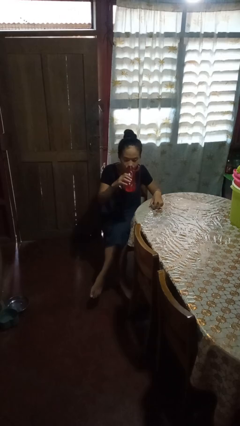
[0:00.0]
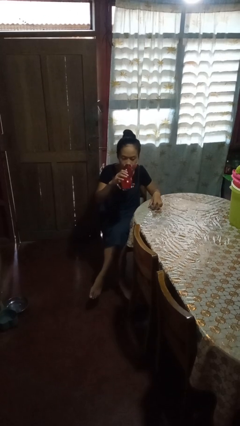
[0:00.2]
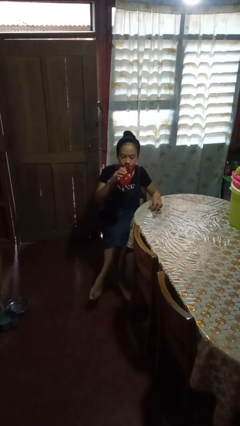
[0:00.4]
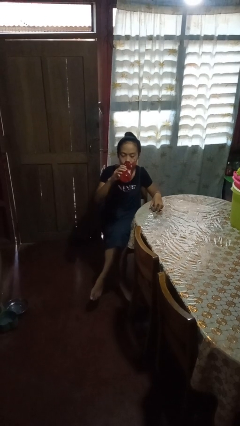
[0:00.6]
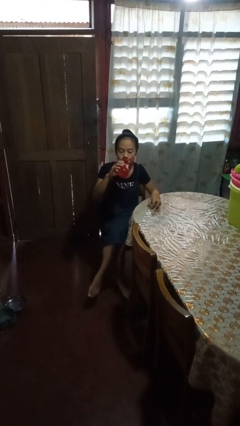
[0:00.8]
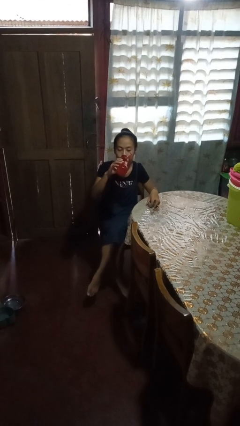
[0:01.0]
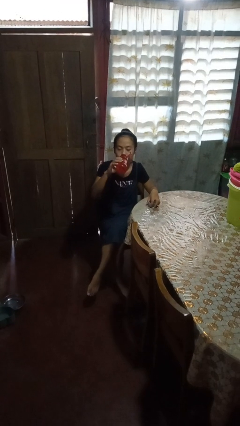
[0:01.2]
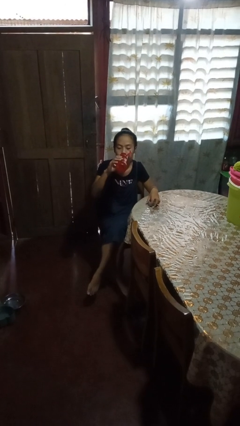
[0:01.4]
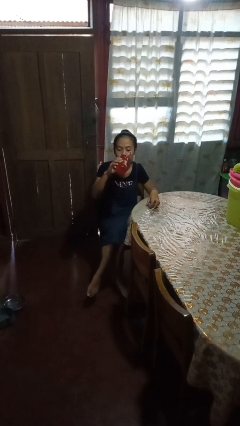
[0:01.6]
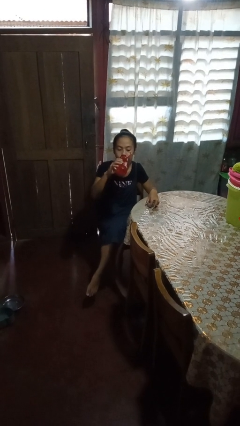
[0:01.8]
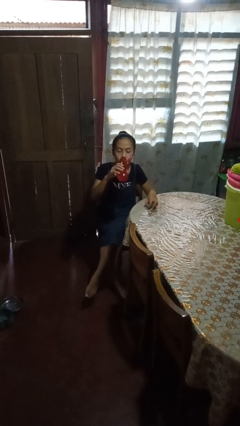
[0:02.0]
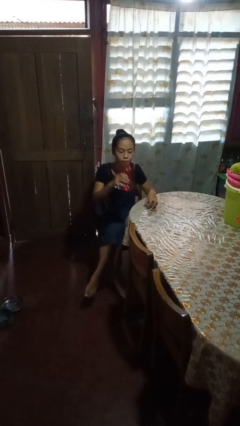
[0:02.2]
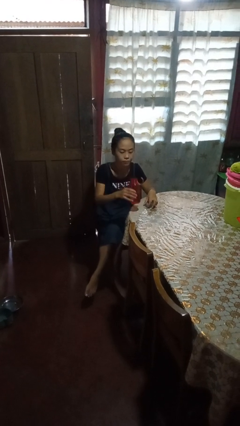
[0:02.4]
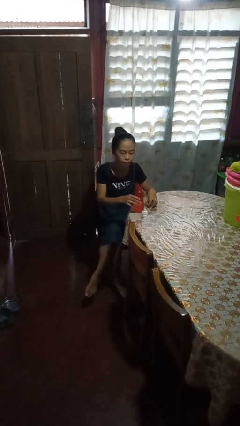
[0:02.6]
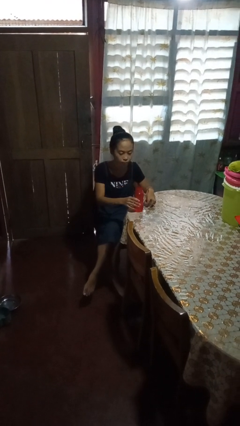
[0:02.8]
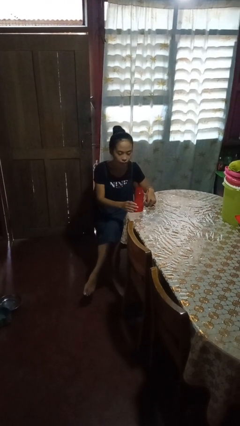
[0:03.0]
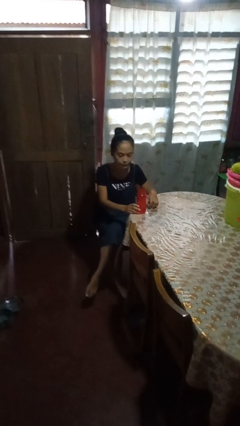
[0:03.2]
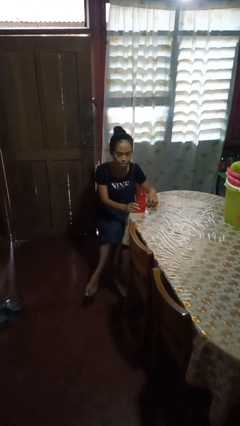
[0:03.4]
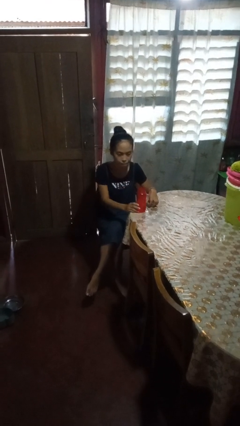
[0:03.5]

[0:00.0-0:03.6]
person drinks from bottle

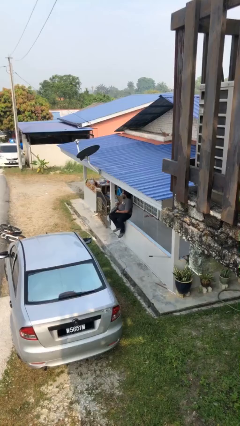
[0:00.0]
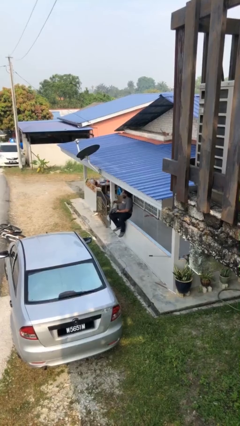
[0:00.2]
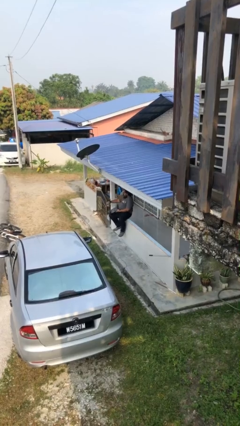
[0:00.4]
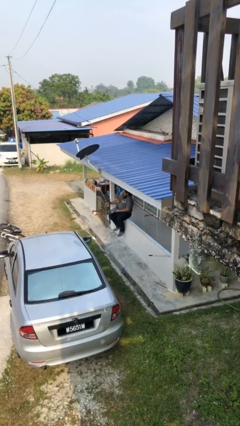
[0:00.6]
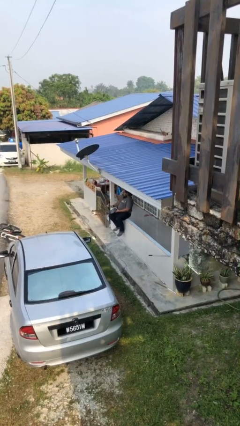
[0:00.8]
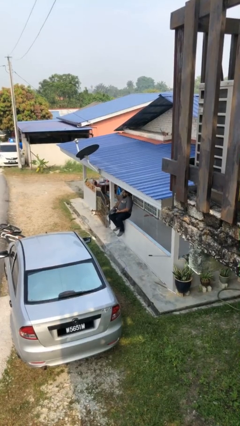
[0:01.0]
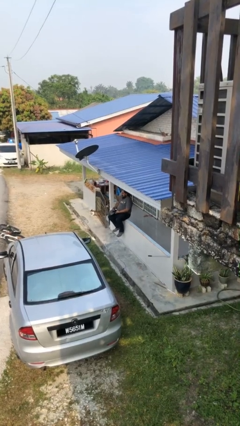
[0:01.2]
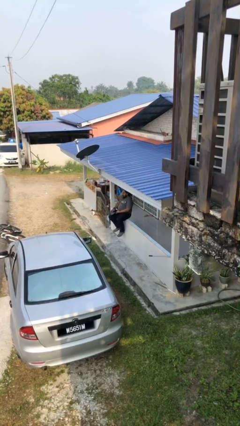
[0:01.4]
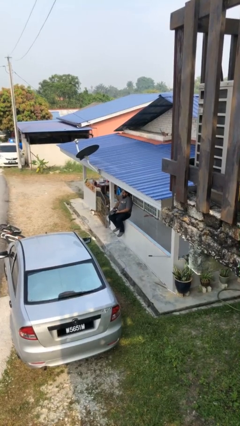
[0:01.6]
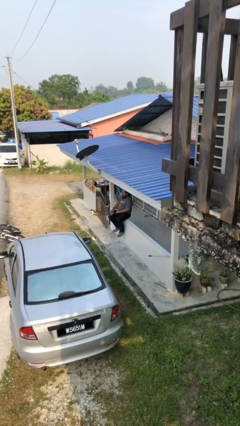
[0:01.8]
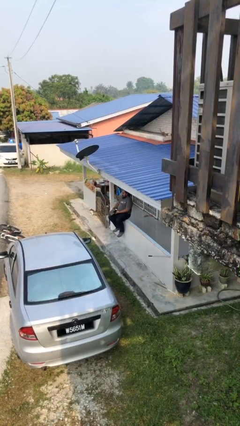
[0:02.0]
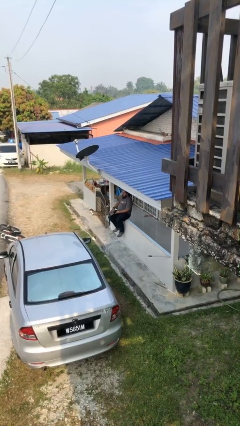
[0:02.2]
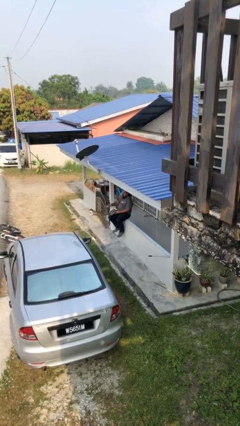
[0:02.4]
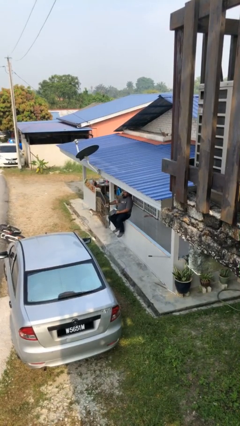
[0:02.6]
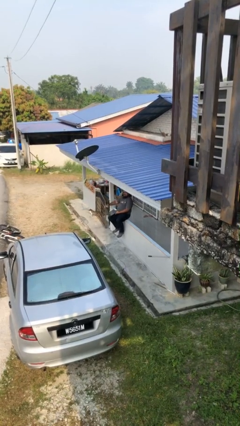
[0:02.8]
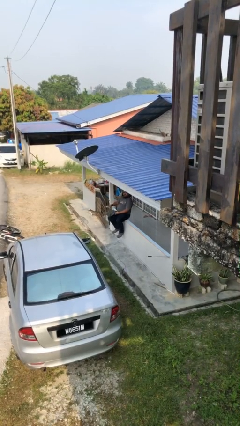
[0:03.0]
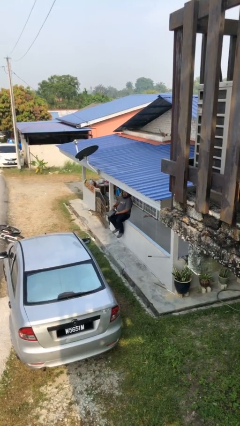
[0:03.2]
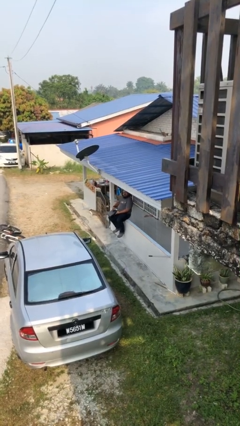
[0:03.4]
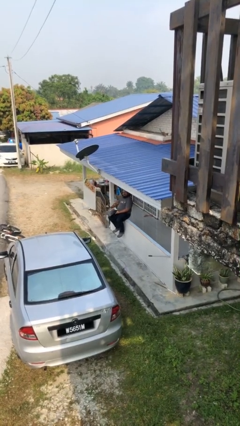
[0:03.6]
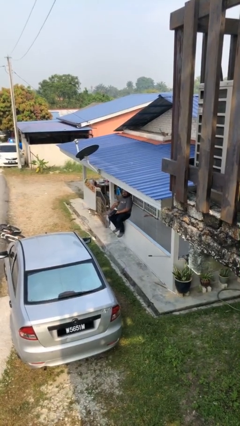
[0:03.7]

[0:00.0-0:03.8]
person interacts with laptop

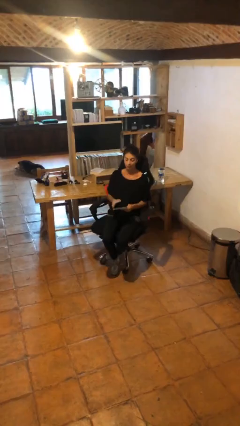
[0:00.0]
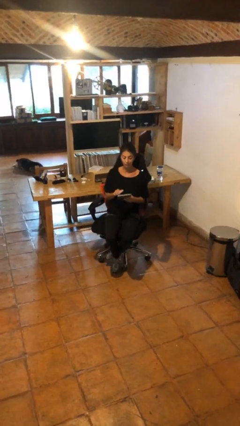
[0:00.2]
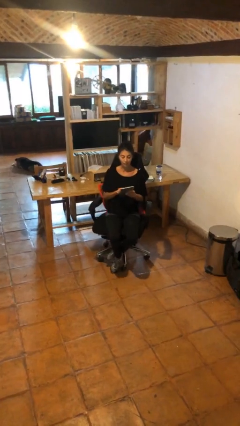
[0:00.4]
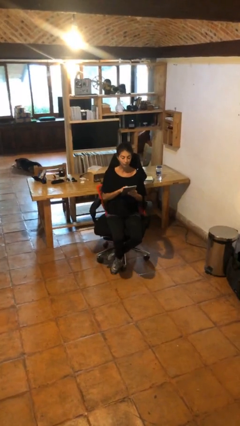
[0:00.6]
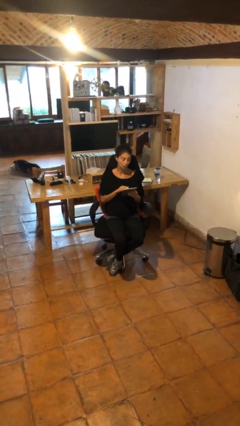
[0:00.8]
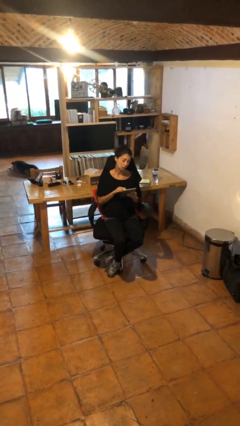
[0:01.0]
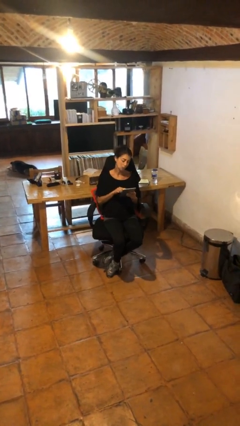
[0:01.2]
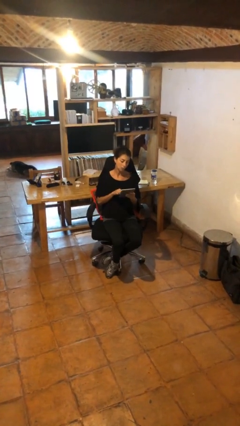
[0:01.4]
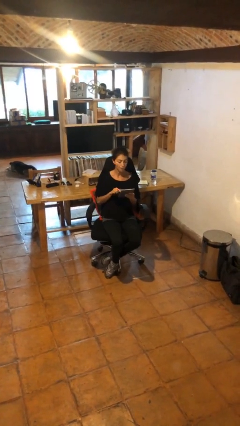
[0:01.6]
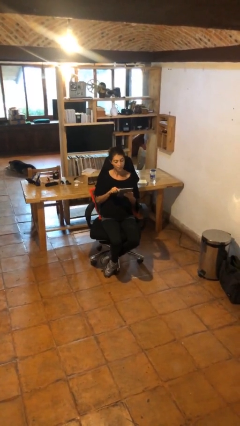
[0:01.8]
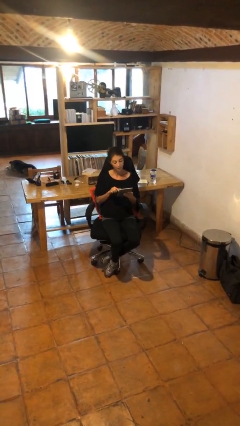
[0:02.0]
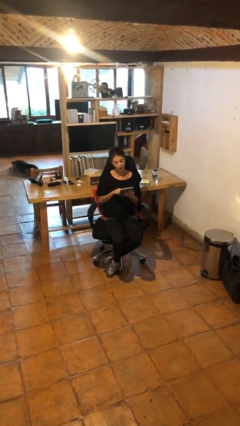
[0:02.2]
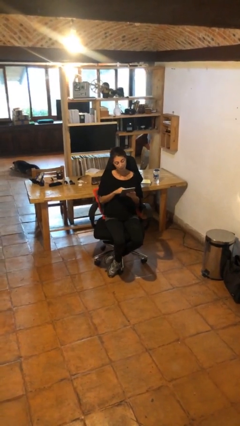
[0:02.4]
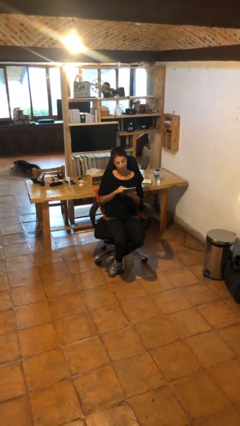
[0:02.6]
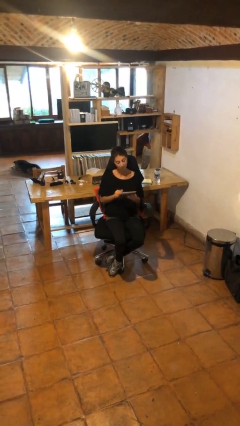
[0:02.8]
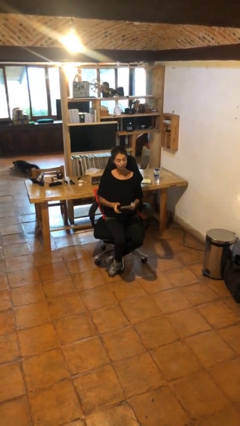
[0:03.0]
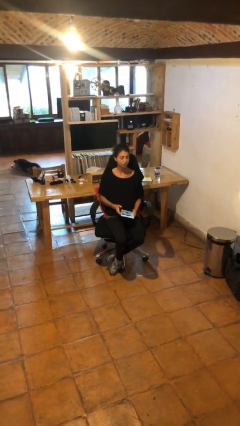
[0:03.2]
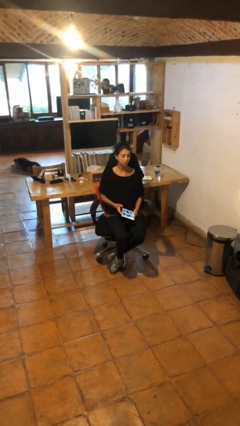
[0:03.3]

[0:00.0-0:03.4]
person interacts with tablet

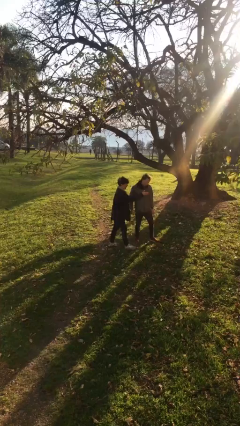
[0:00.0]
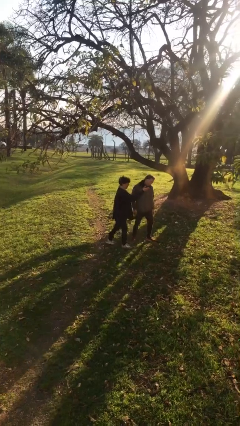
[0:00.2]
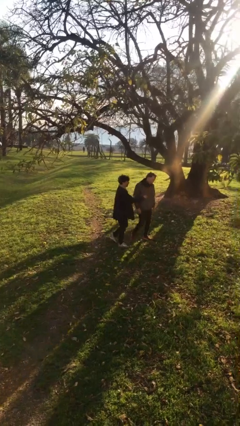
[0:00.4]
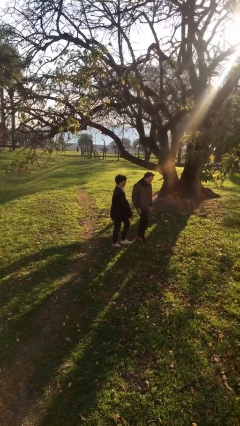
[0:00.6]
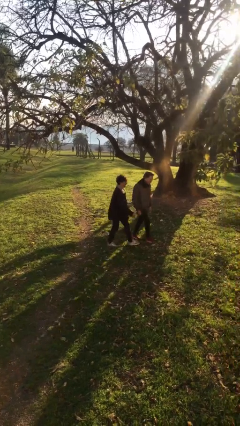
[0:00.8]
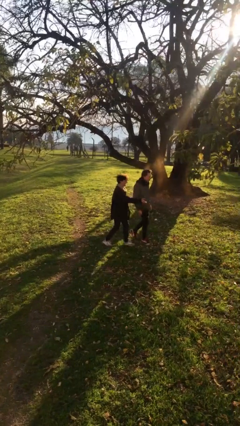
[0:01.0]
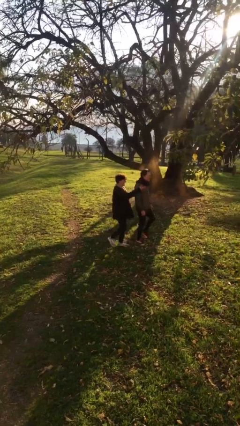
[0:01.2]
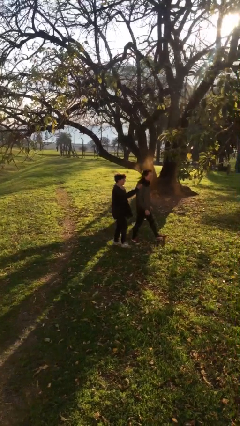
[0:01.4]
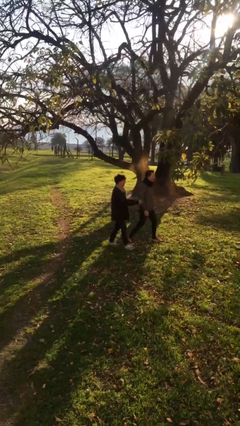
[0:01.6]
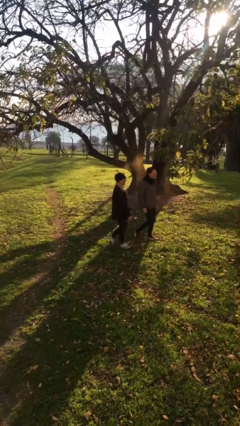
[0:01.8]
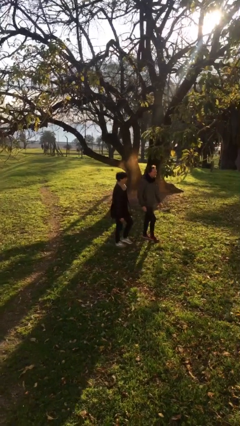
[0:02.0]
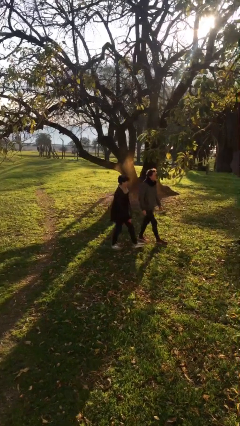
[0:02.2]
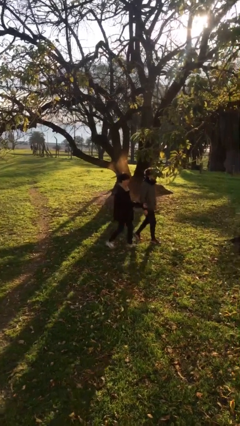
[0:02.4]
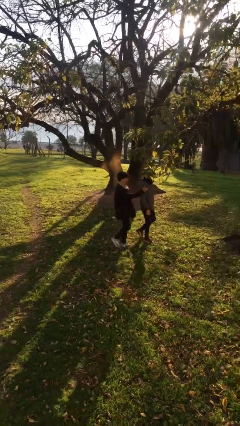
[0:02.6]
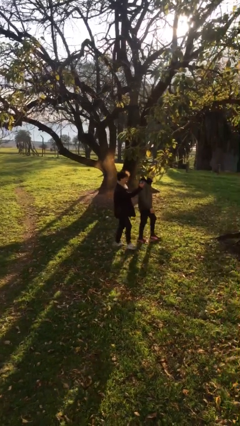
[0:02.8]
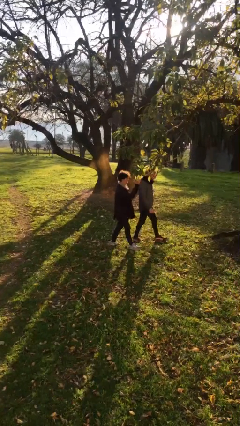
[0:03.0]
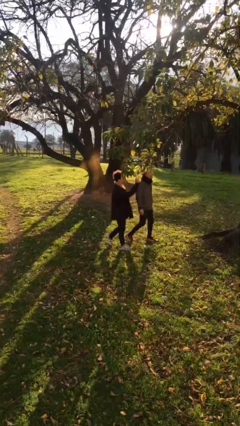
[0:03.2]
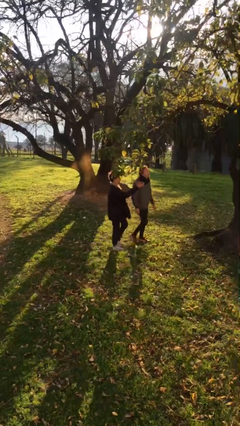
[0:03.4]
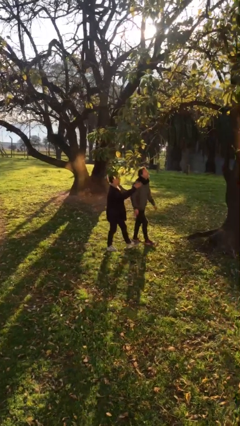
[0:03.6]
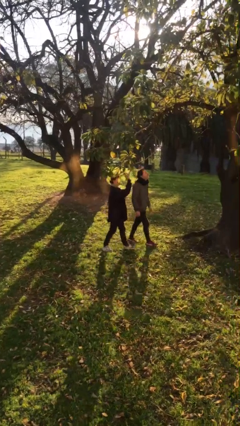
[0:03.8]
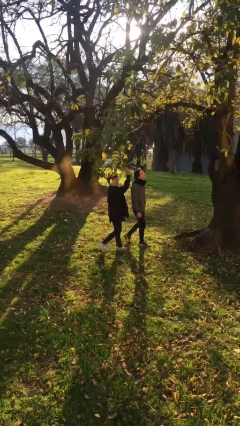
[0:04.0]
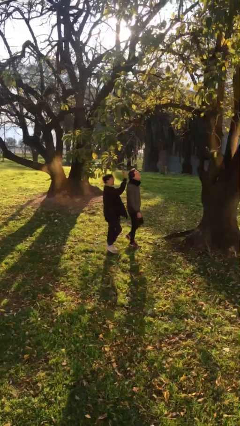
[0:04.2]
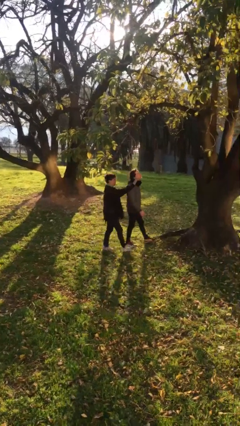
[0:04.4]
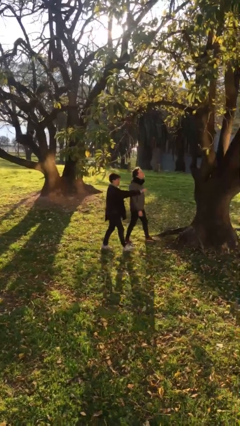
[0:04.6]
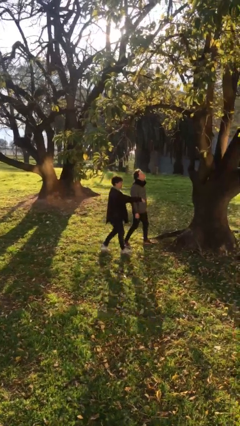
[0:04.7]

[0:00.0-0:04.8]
person talks to person

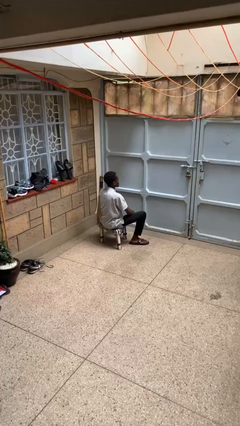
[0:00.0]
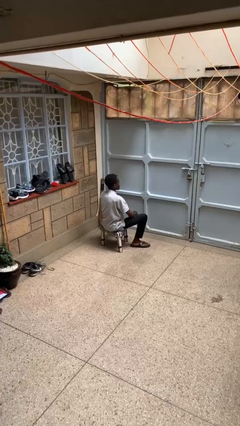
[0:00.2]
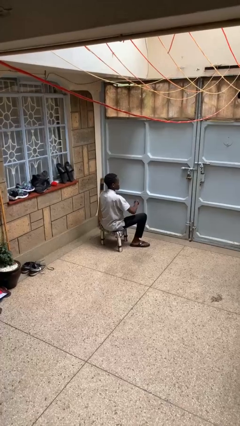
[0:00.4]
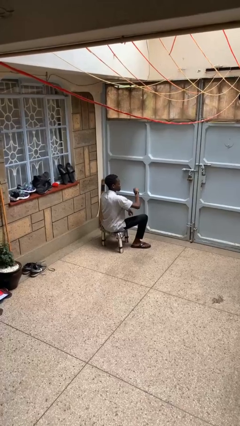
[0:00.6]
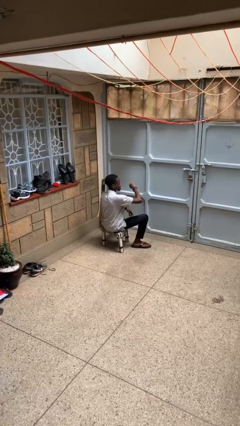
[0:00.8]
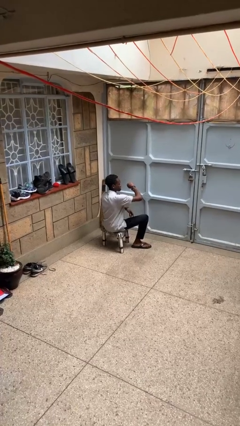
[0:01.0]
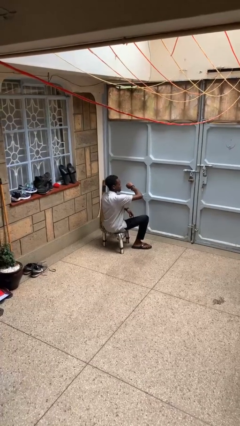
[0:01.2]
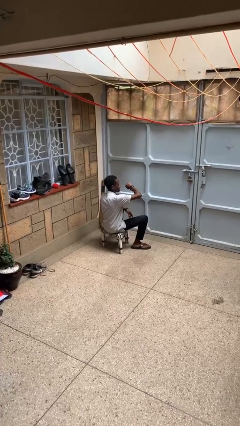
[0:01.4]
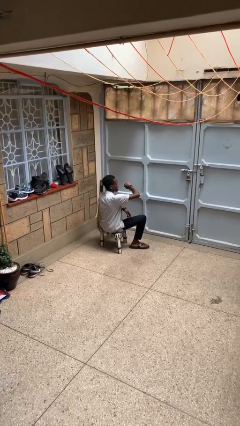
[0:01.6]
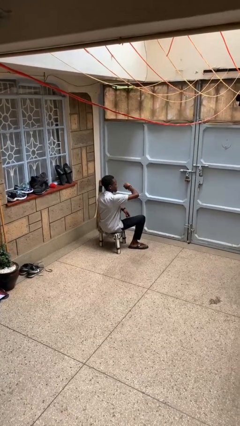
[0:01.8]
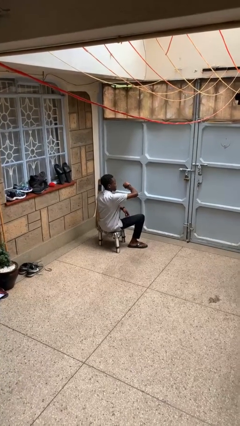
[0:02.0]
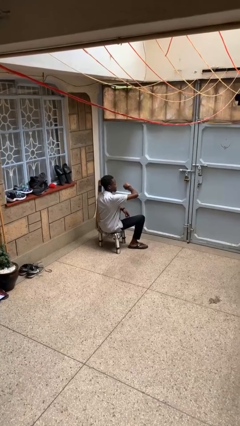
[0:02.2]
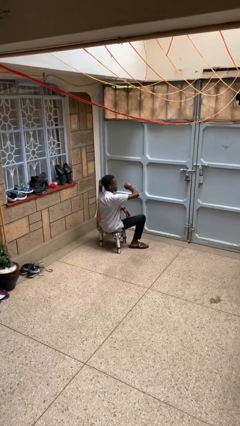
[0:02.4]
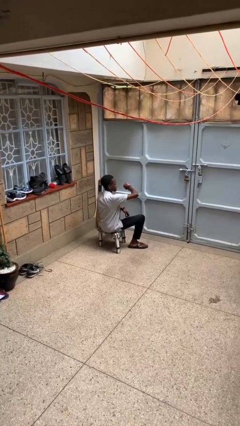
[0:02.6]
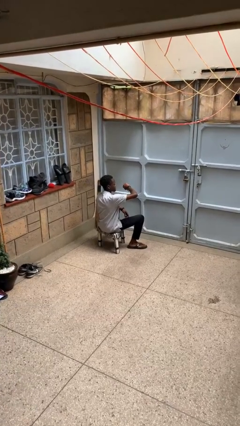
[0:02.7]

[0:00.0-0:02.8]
person looks at wristwatch
